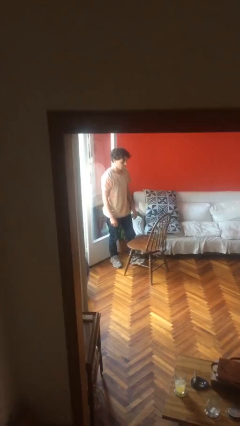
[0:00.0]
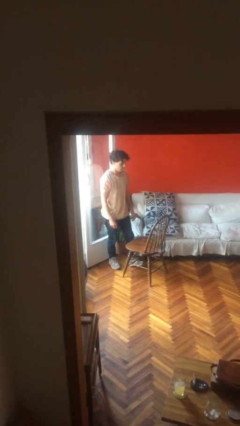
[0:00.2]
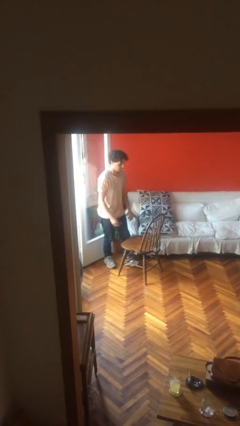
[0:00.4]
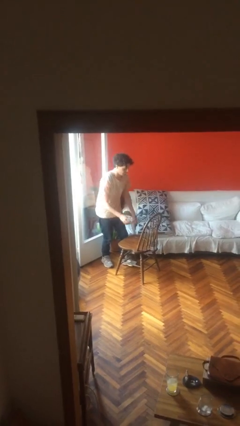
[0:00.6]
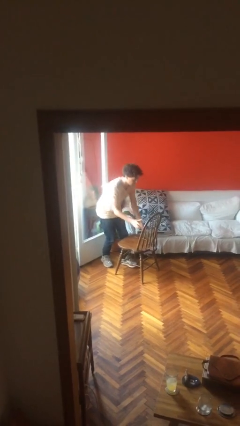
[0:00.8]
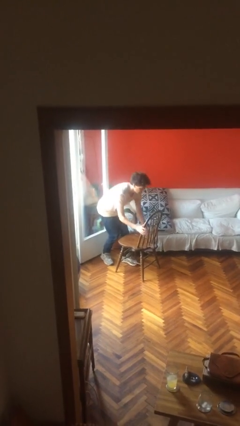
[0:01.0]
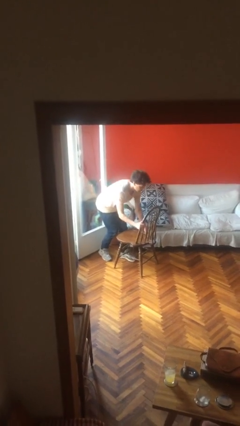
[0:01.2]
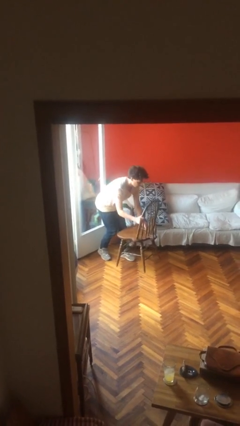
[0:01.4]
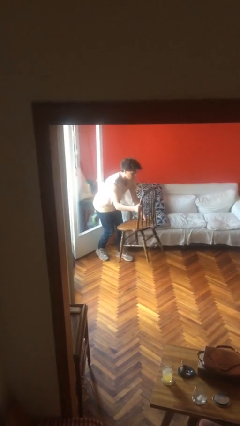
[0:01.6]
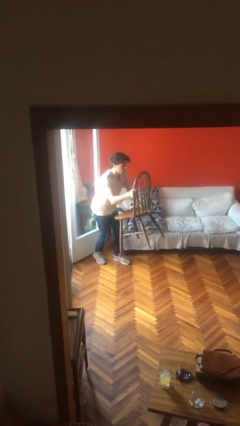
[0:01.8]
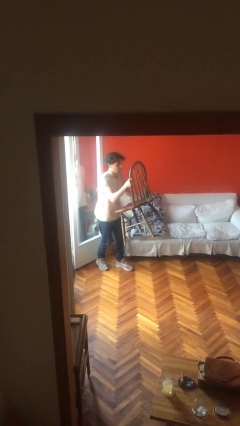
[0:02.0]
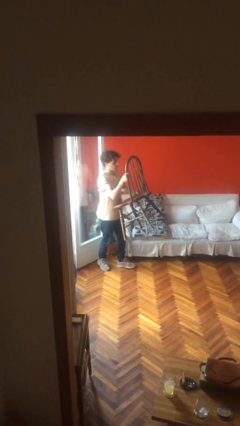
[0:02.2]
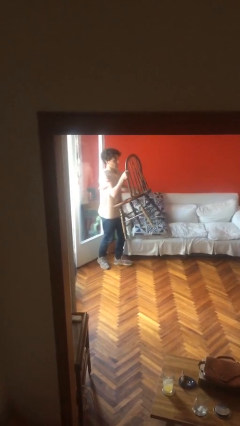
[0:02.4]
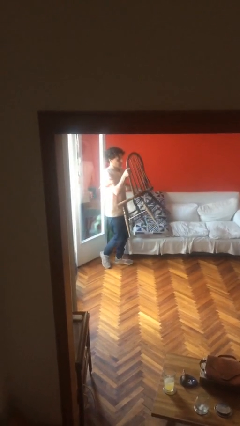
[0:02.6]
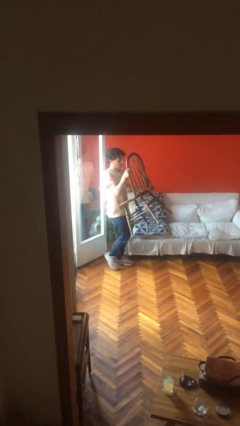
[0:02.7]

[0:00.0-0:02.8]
person picks up object from floor

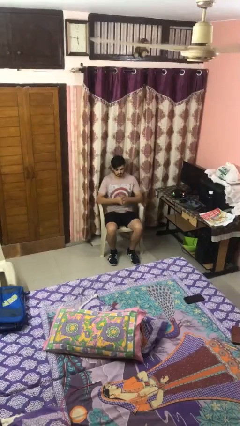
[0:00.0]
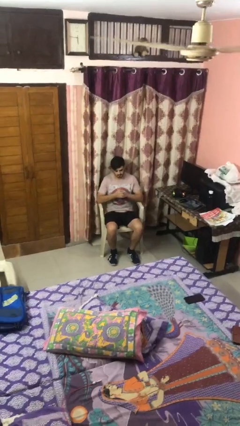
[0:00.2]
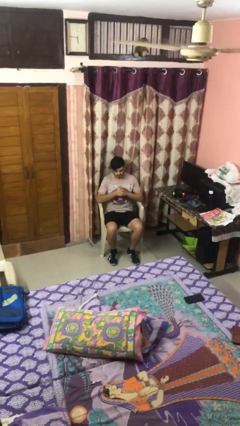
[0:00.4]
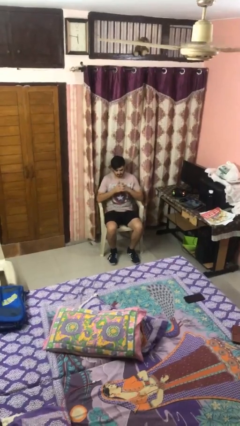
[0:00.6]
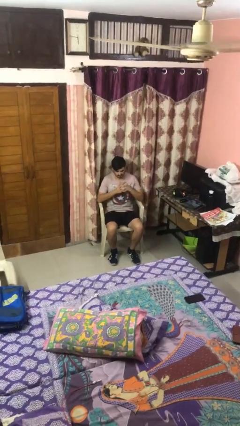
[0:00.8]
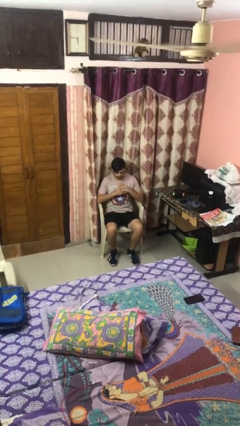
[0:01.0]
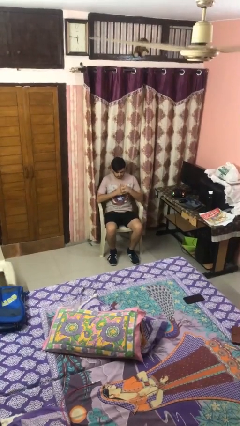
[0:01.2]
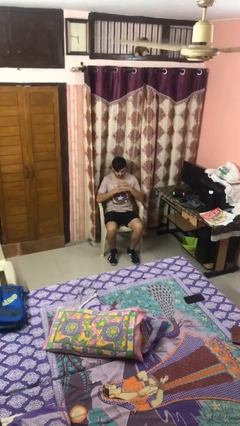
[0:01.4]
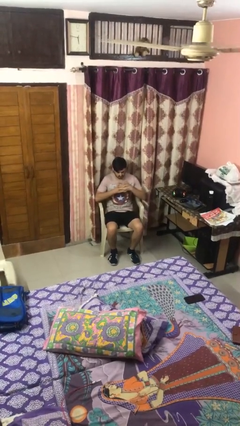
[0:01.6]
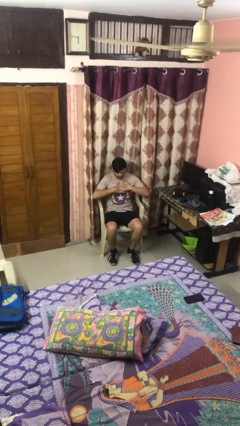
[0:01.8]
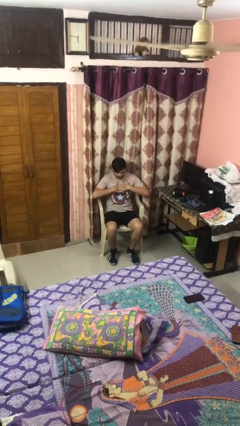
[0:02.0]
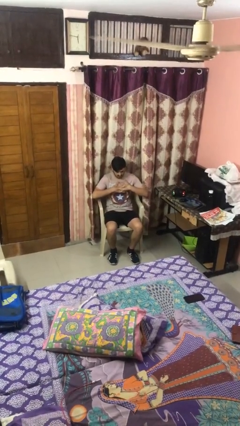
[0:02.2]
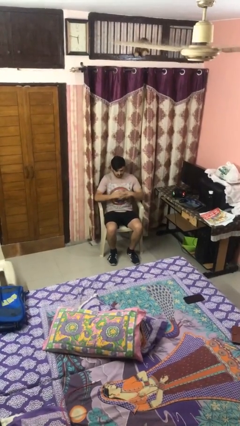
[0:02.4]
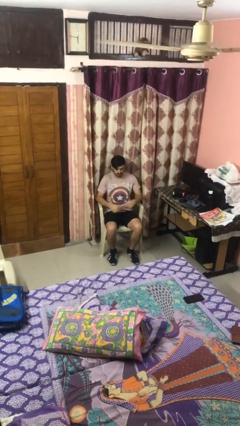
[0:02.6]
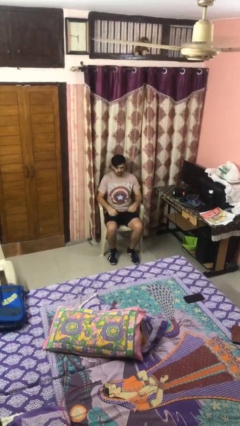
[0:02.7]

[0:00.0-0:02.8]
person cracks knuckles

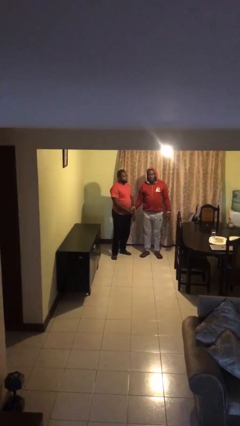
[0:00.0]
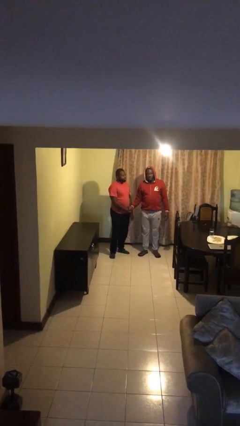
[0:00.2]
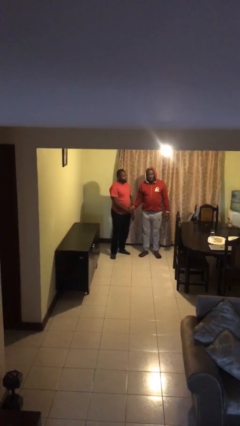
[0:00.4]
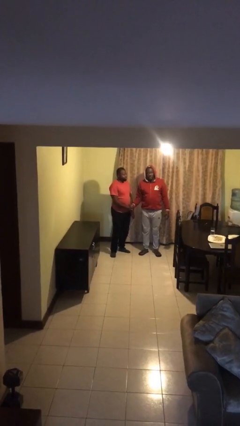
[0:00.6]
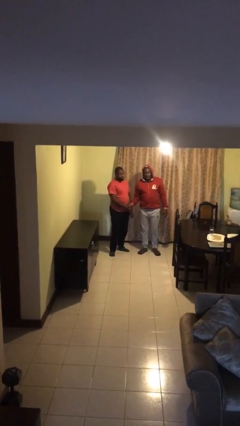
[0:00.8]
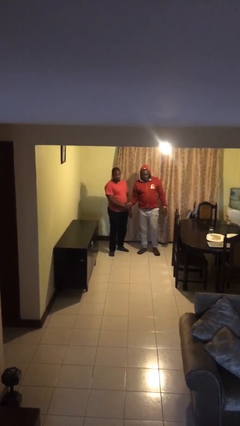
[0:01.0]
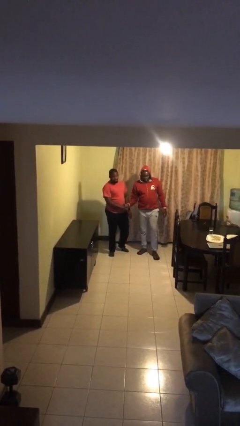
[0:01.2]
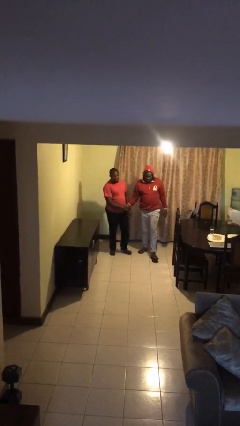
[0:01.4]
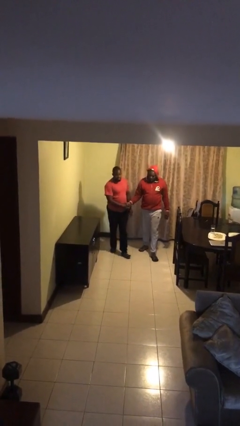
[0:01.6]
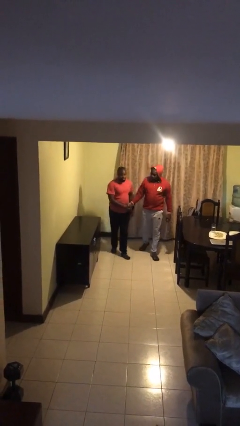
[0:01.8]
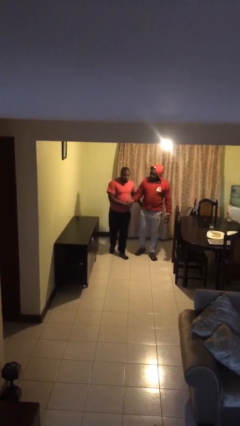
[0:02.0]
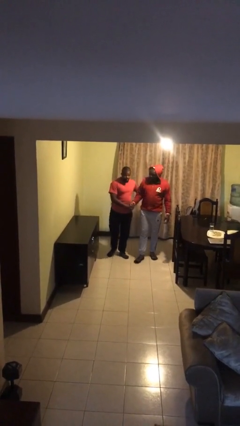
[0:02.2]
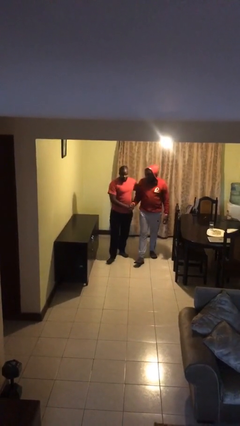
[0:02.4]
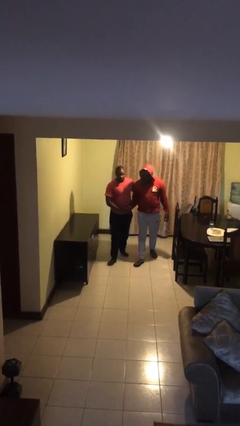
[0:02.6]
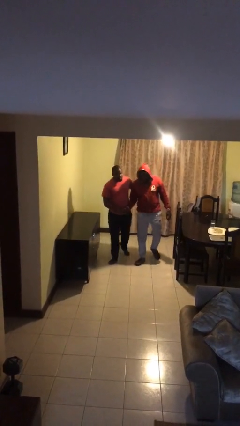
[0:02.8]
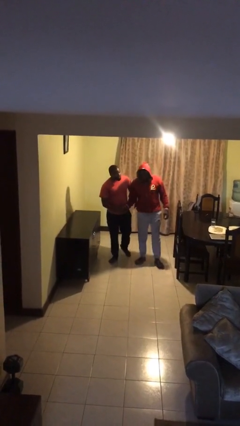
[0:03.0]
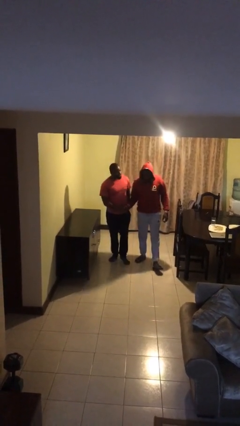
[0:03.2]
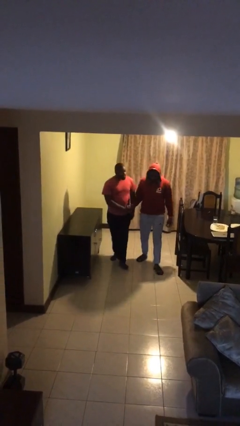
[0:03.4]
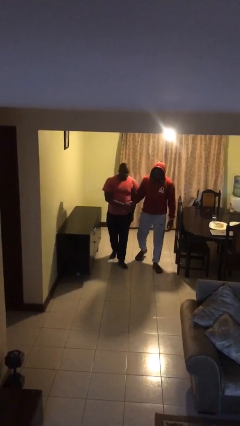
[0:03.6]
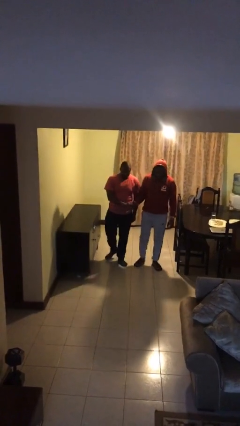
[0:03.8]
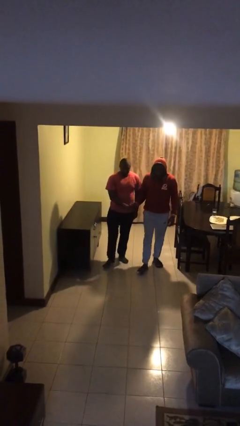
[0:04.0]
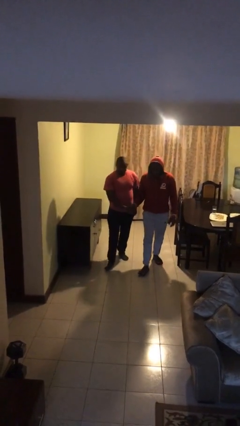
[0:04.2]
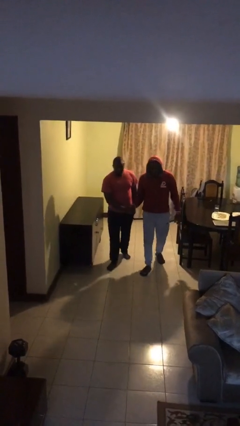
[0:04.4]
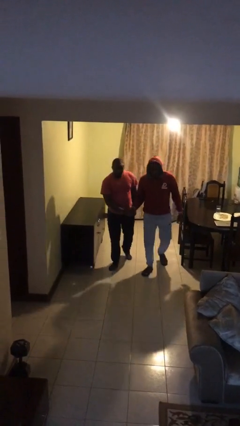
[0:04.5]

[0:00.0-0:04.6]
person holds hand

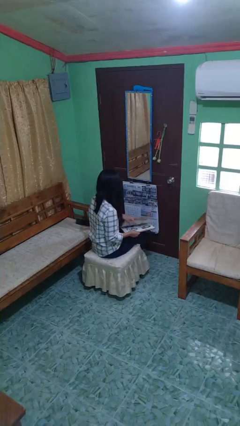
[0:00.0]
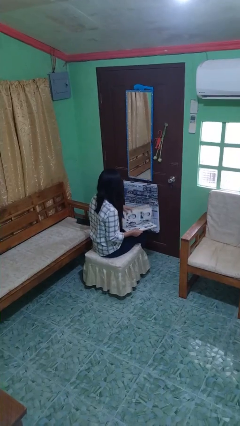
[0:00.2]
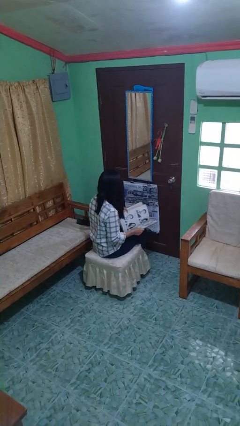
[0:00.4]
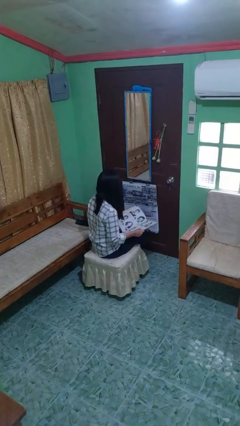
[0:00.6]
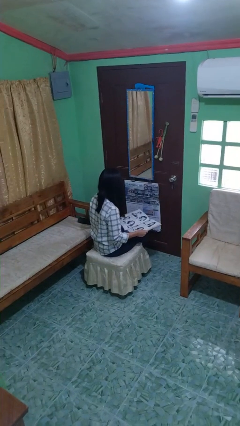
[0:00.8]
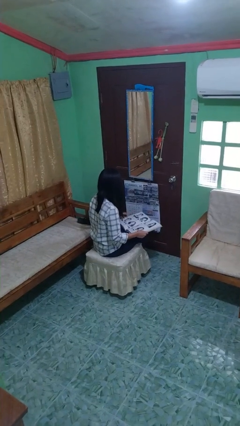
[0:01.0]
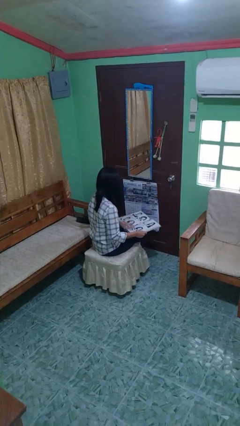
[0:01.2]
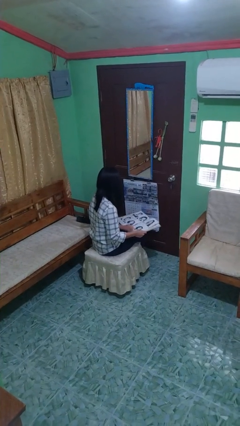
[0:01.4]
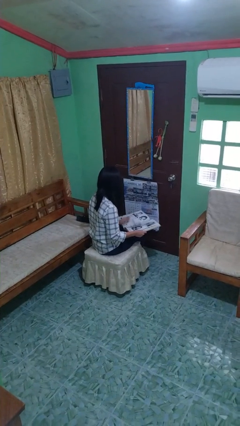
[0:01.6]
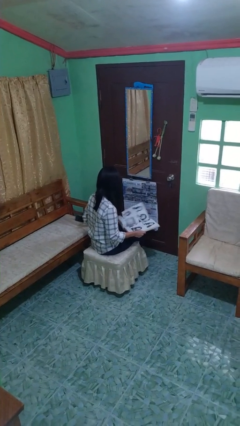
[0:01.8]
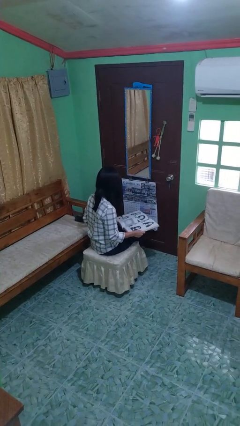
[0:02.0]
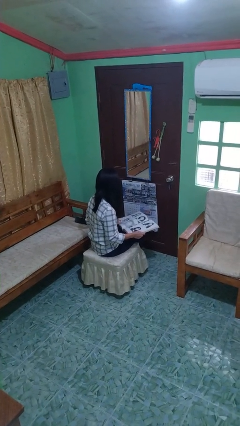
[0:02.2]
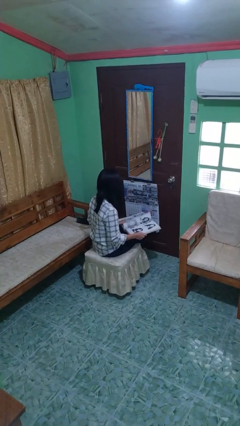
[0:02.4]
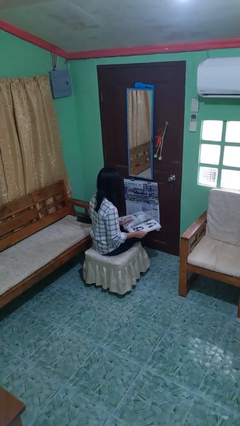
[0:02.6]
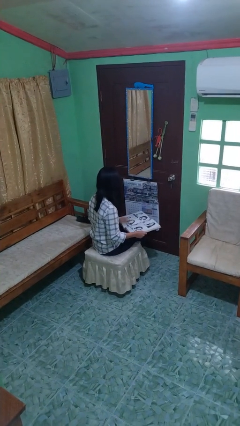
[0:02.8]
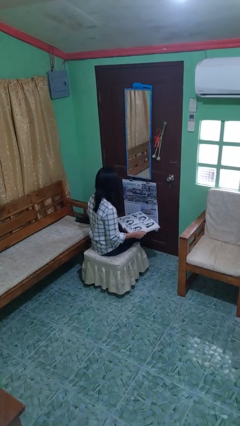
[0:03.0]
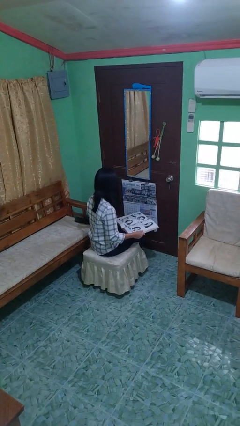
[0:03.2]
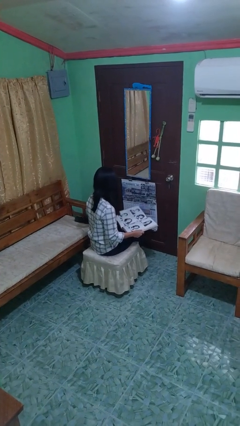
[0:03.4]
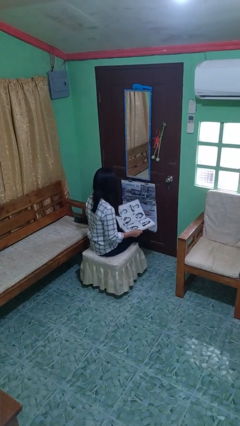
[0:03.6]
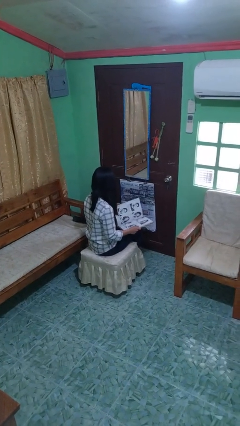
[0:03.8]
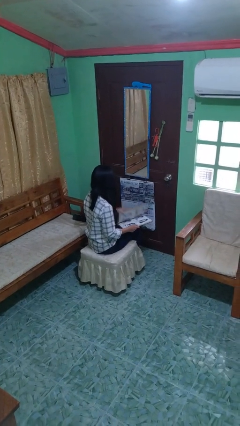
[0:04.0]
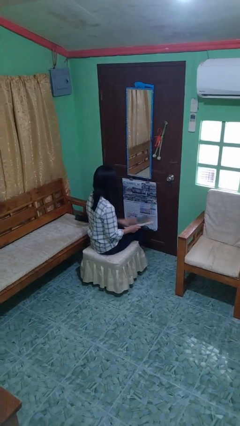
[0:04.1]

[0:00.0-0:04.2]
person reads book

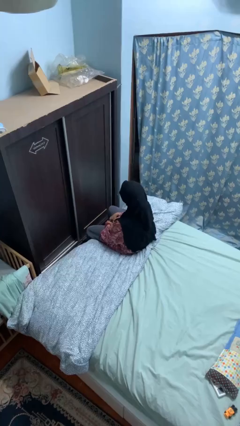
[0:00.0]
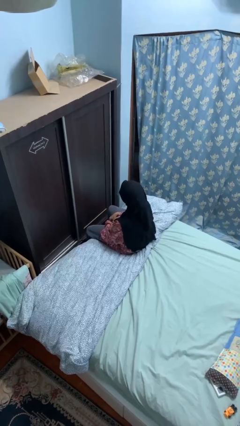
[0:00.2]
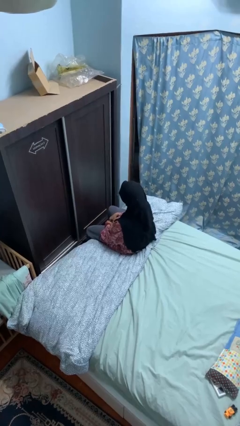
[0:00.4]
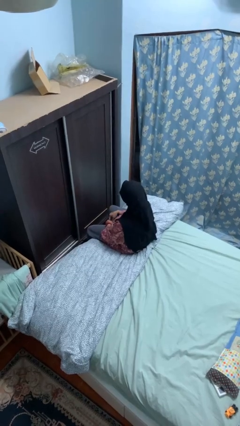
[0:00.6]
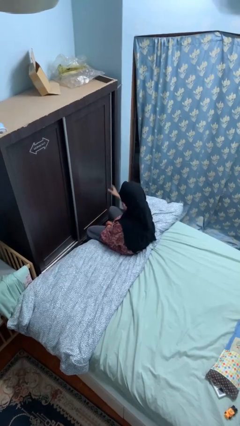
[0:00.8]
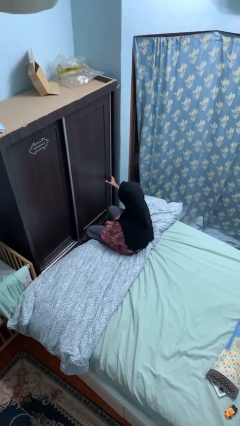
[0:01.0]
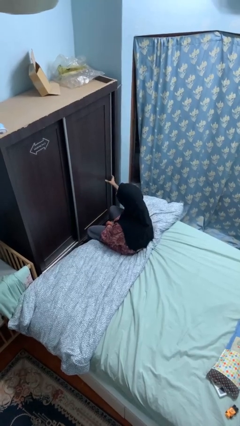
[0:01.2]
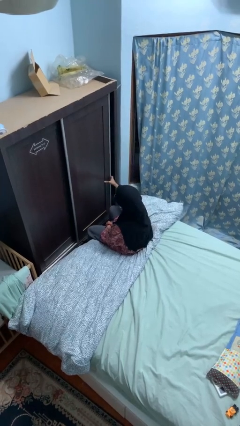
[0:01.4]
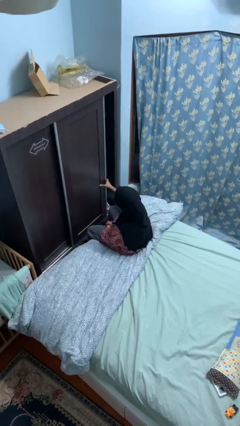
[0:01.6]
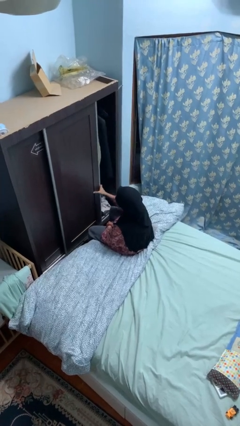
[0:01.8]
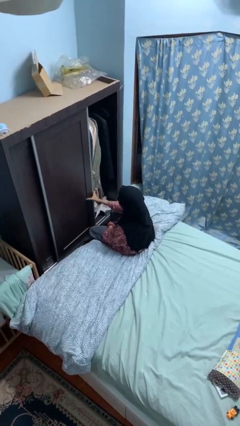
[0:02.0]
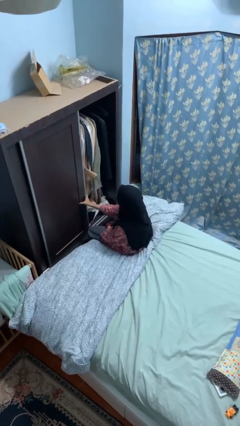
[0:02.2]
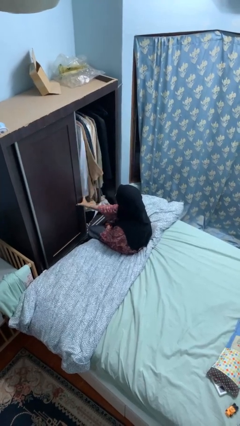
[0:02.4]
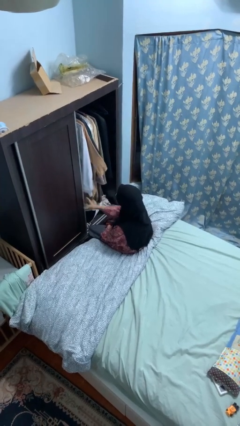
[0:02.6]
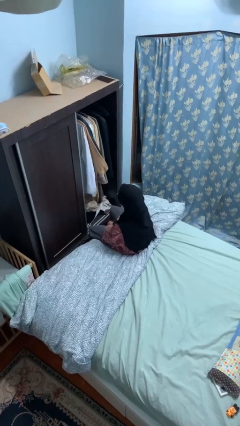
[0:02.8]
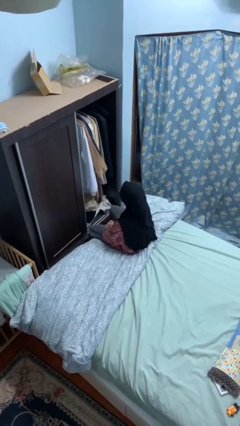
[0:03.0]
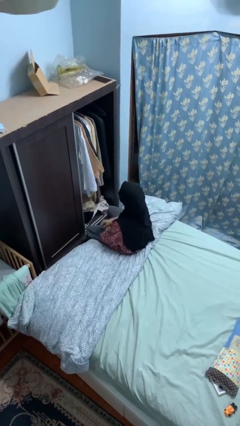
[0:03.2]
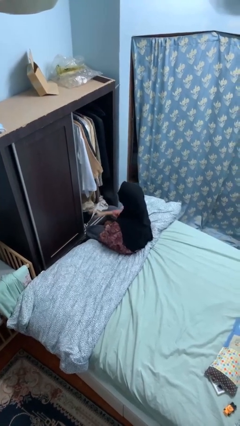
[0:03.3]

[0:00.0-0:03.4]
person opens closet door

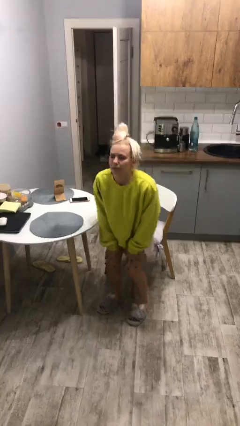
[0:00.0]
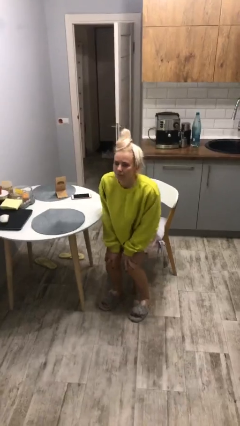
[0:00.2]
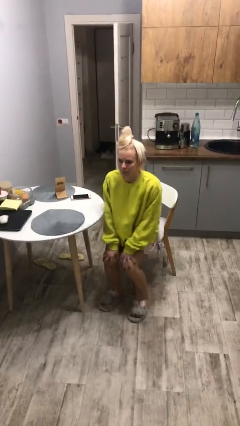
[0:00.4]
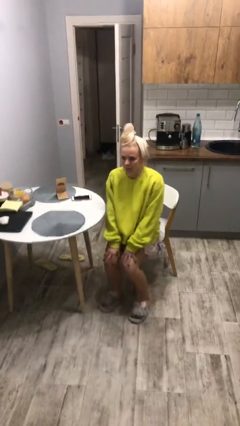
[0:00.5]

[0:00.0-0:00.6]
person sits down
